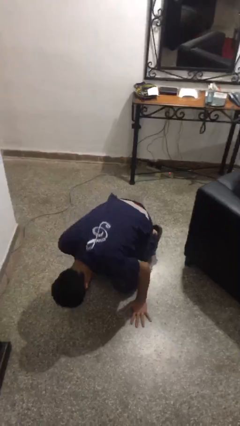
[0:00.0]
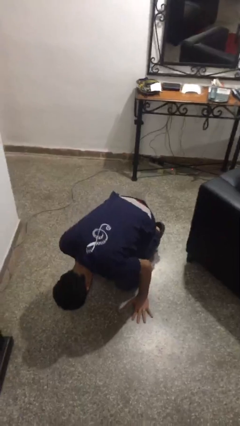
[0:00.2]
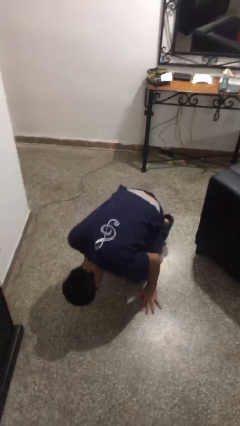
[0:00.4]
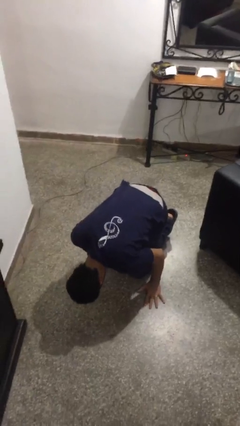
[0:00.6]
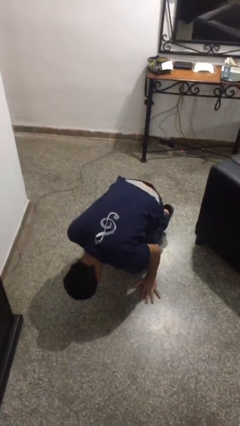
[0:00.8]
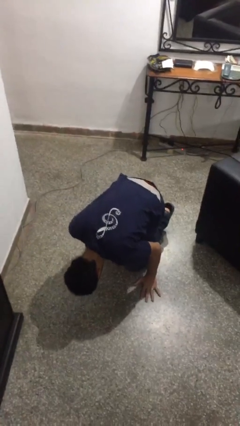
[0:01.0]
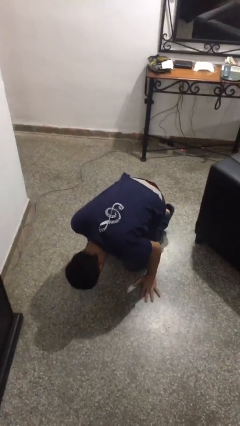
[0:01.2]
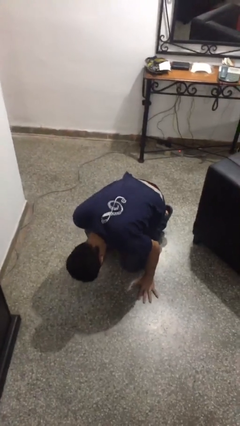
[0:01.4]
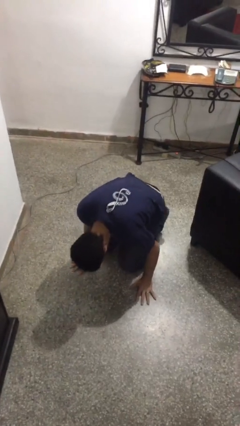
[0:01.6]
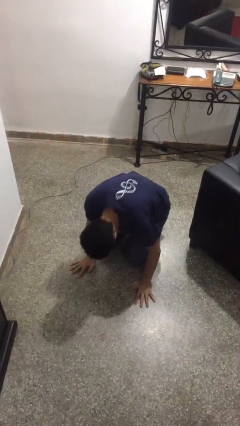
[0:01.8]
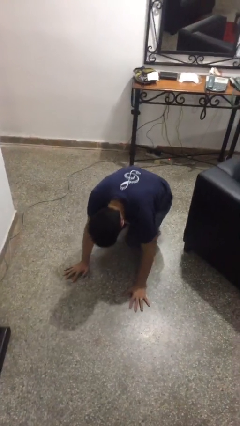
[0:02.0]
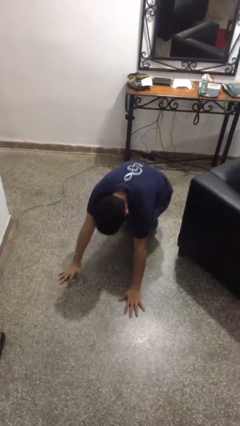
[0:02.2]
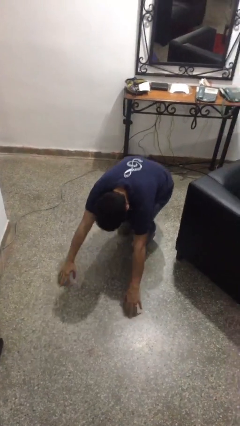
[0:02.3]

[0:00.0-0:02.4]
person lies down on floor

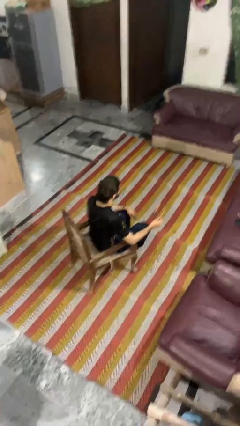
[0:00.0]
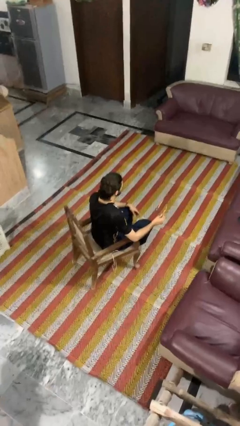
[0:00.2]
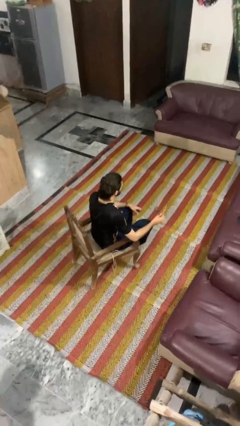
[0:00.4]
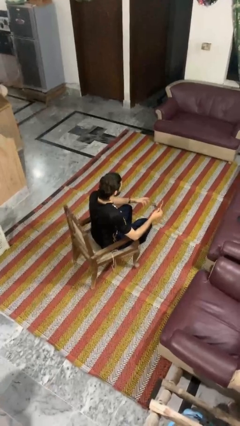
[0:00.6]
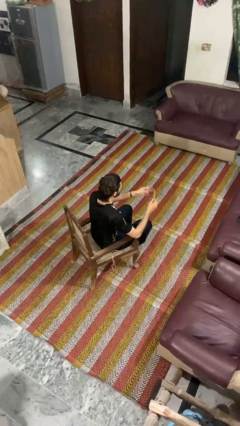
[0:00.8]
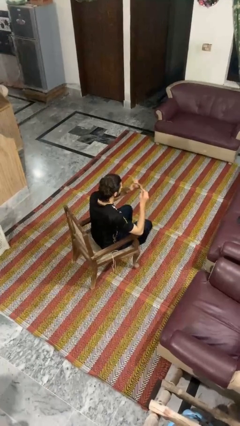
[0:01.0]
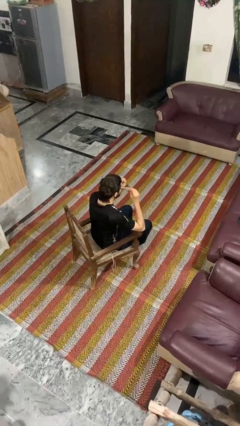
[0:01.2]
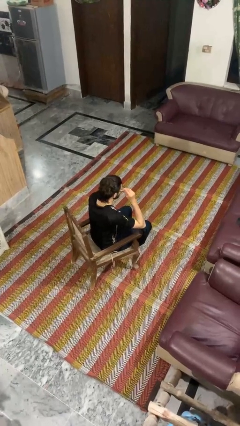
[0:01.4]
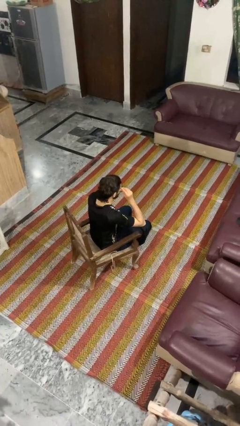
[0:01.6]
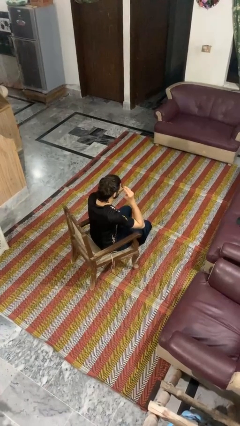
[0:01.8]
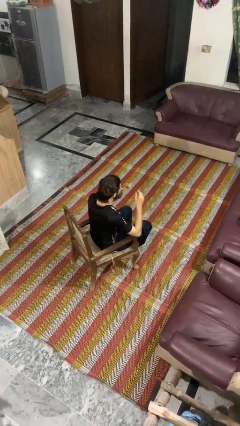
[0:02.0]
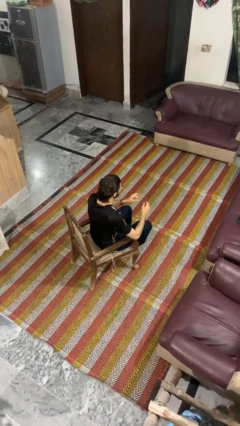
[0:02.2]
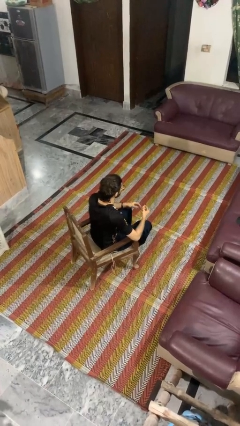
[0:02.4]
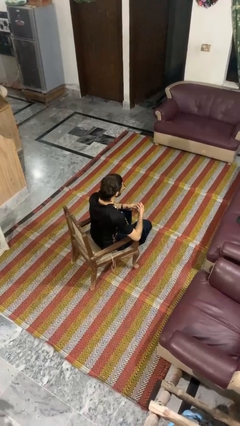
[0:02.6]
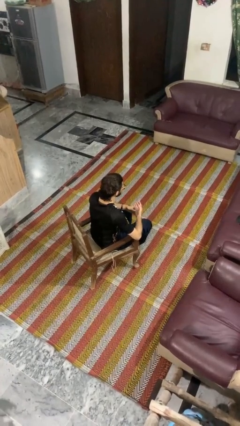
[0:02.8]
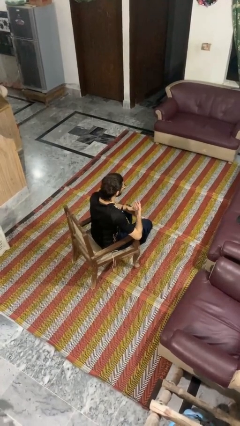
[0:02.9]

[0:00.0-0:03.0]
person puts on glasses

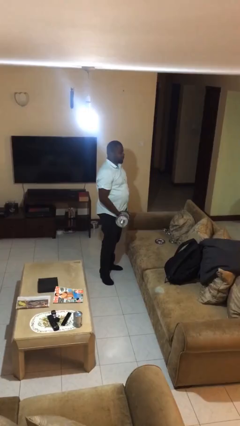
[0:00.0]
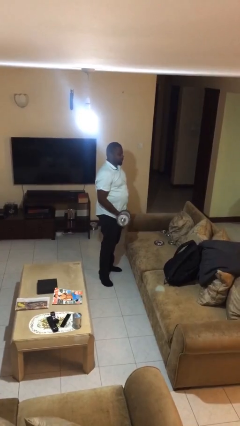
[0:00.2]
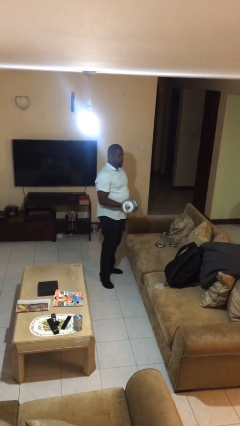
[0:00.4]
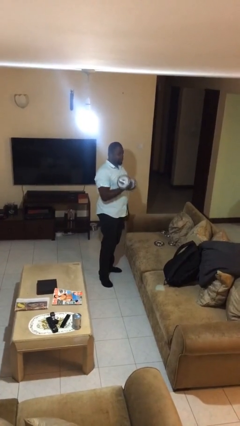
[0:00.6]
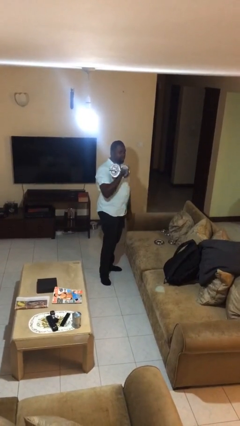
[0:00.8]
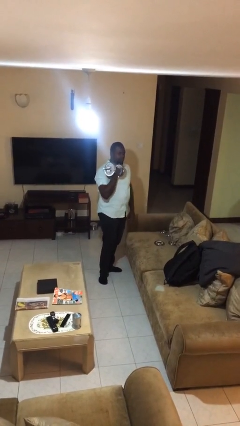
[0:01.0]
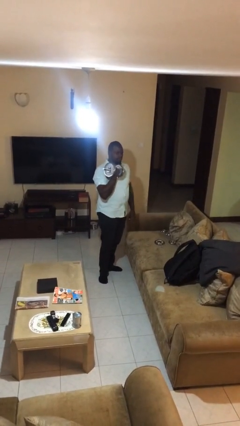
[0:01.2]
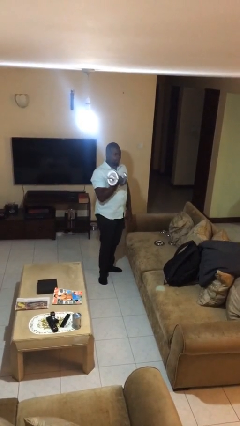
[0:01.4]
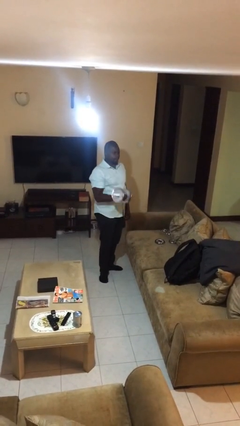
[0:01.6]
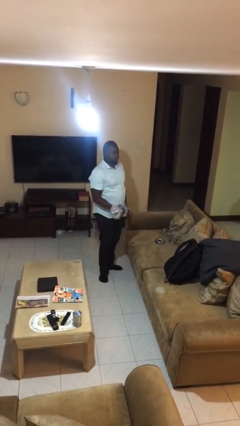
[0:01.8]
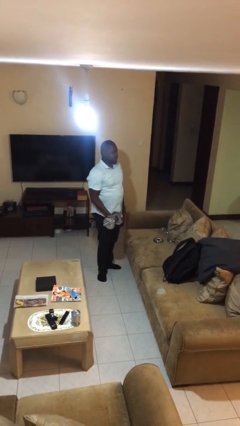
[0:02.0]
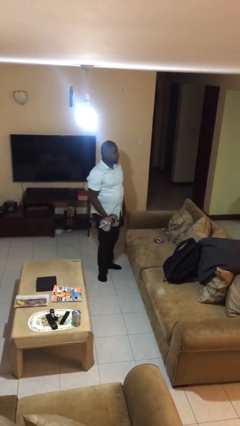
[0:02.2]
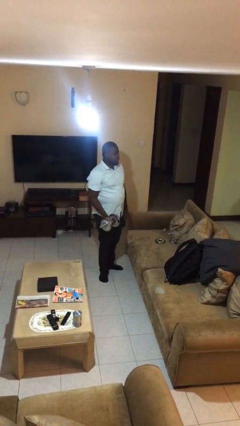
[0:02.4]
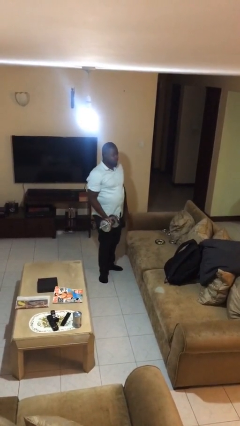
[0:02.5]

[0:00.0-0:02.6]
person lifts dumbbells

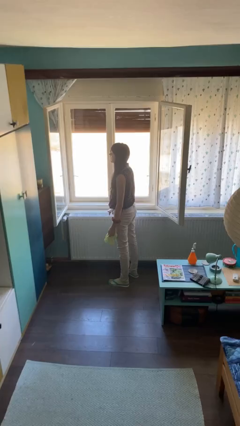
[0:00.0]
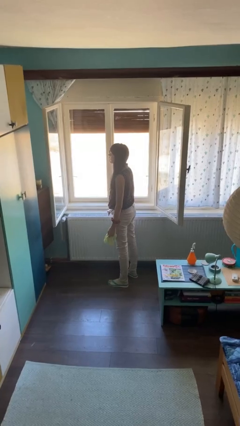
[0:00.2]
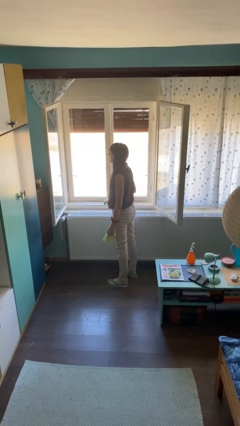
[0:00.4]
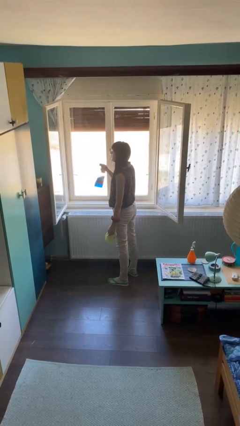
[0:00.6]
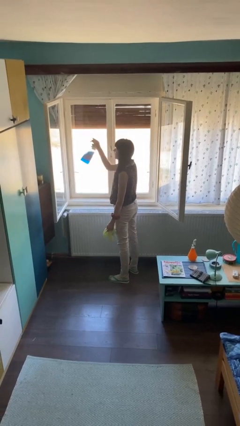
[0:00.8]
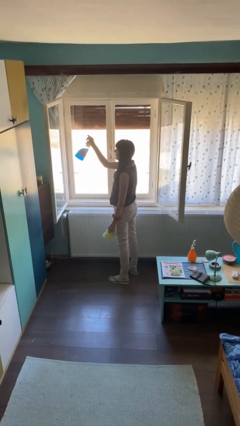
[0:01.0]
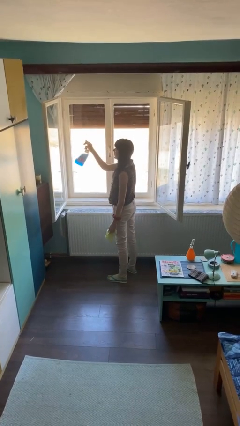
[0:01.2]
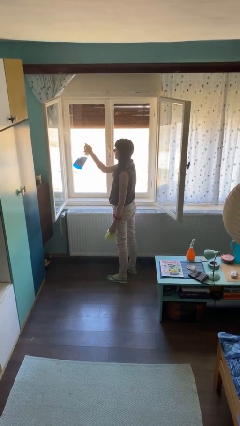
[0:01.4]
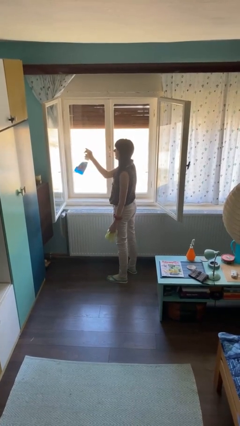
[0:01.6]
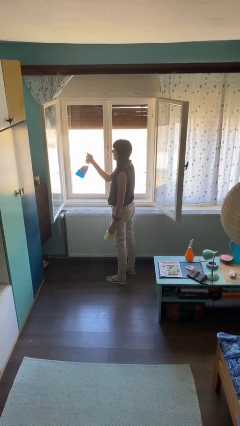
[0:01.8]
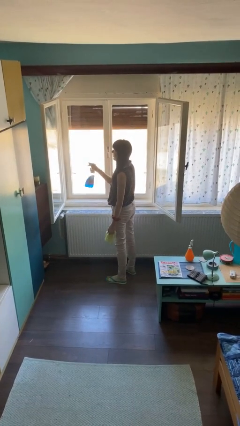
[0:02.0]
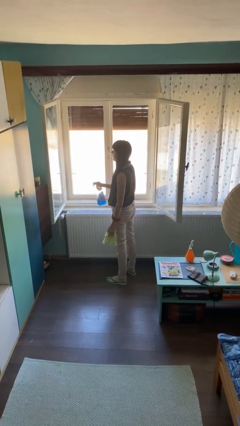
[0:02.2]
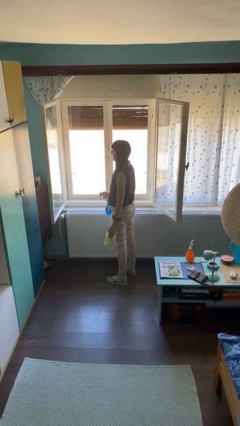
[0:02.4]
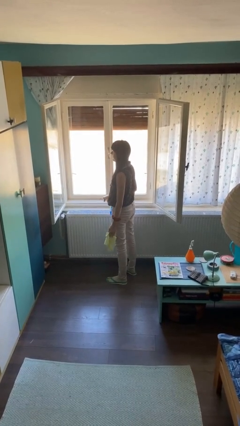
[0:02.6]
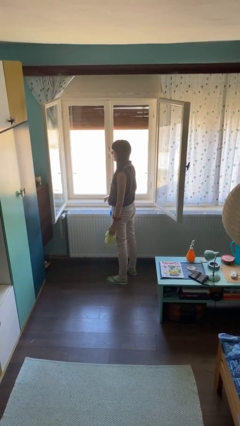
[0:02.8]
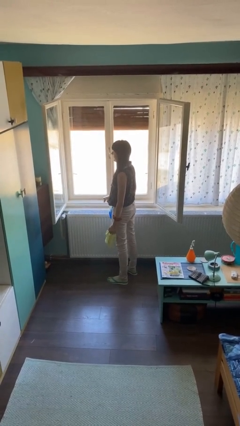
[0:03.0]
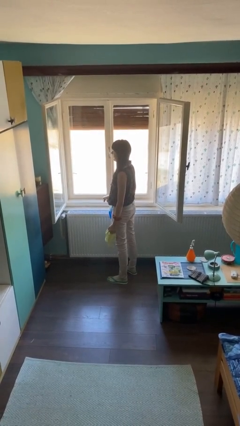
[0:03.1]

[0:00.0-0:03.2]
person sprays from bottle

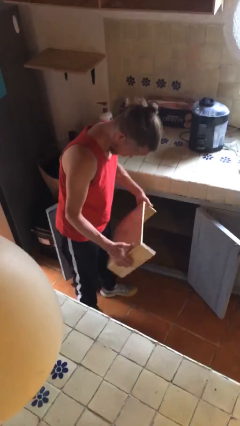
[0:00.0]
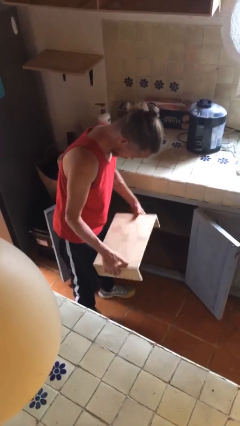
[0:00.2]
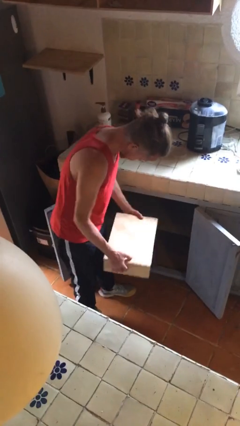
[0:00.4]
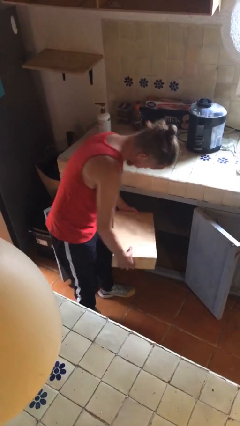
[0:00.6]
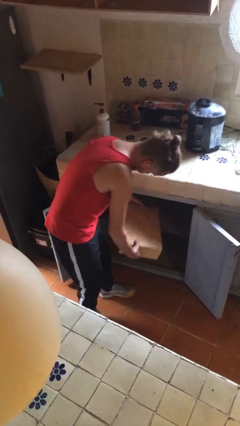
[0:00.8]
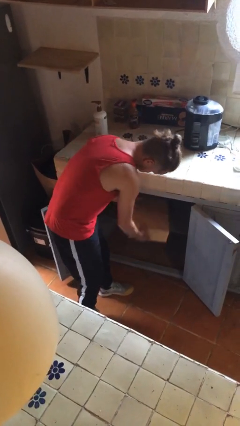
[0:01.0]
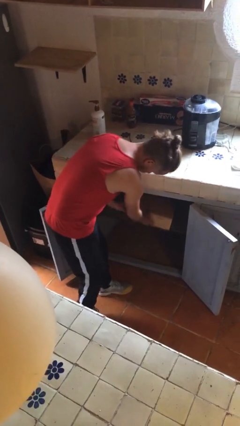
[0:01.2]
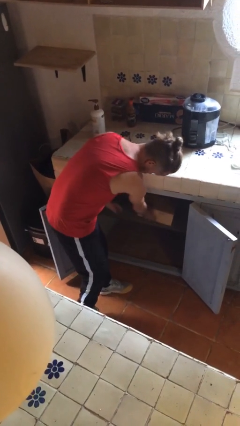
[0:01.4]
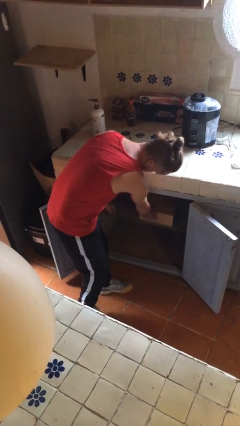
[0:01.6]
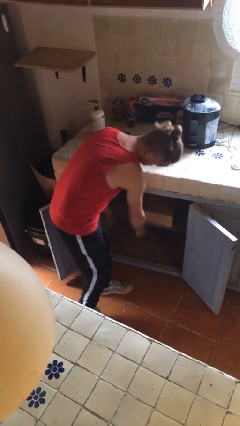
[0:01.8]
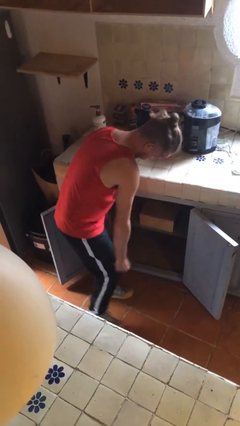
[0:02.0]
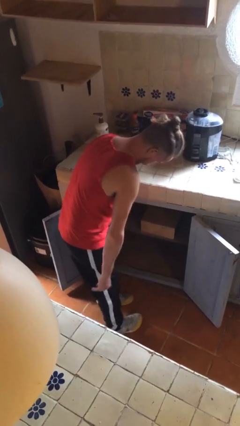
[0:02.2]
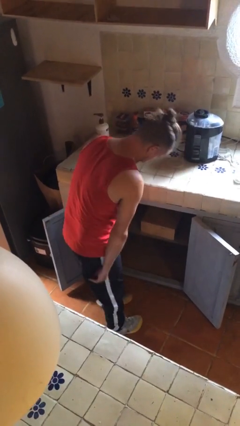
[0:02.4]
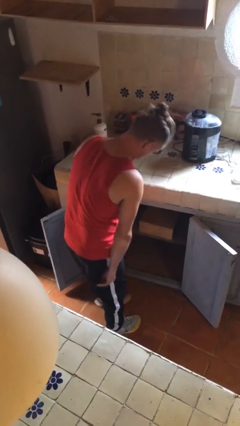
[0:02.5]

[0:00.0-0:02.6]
person puts down object into cabinet

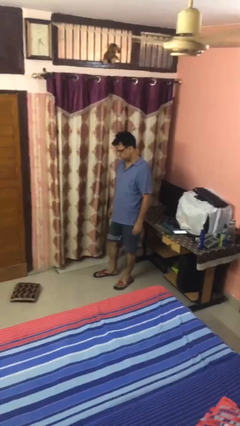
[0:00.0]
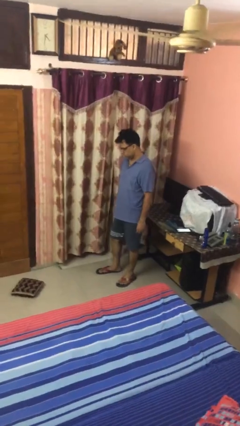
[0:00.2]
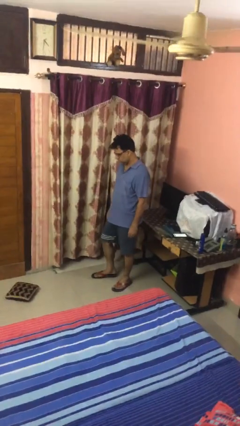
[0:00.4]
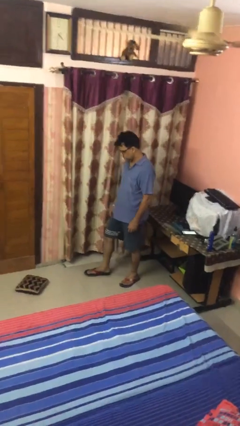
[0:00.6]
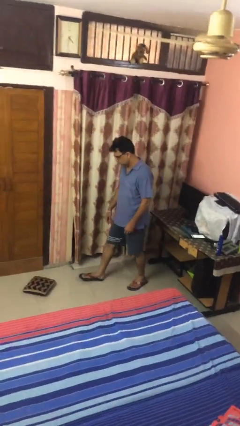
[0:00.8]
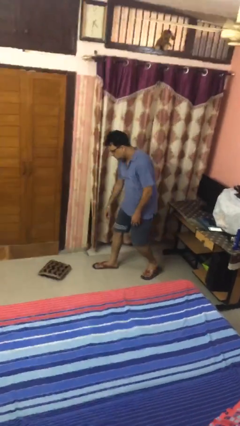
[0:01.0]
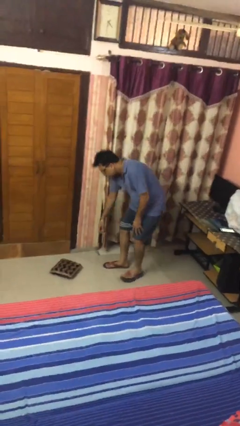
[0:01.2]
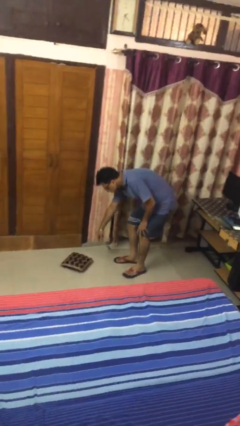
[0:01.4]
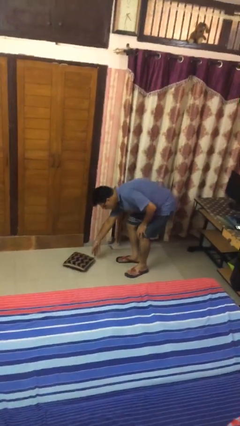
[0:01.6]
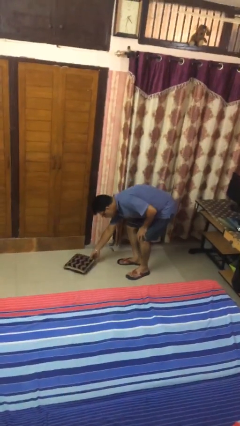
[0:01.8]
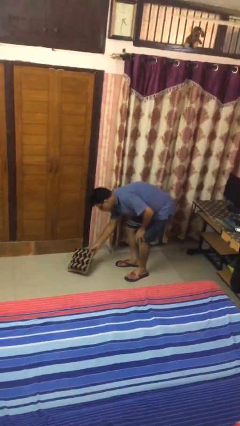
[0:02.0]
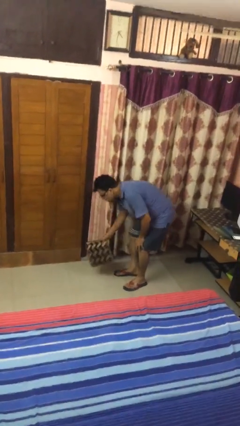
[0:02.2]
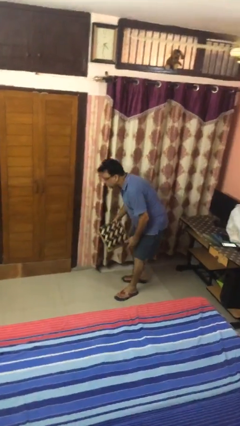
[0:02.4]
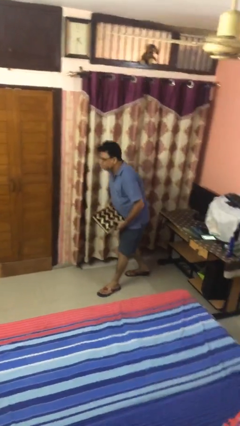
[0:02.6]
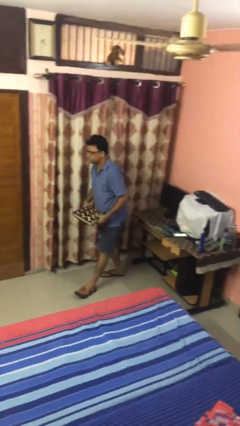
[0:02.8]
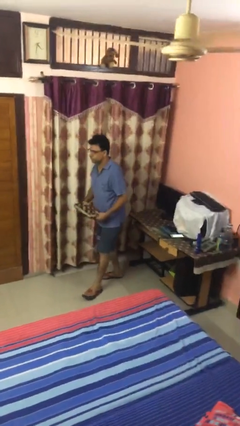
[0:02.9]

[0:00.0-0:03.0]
person picks up object from floor

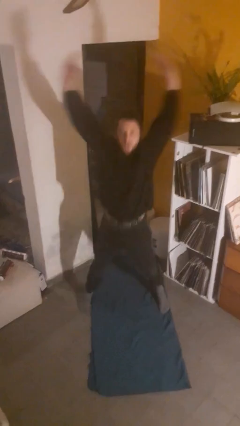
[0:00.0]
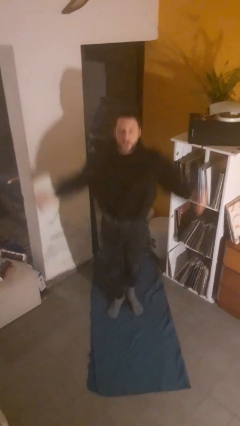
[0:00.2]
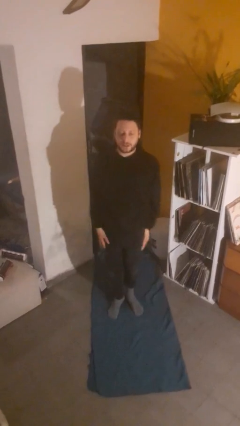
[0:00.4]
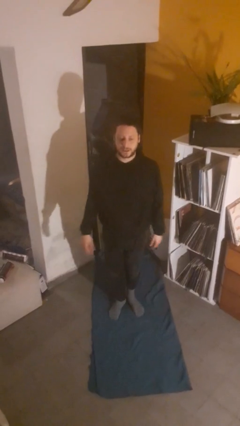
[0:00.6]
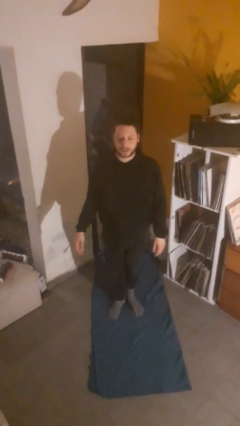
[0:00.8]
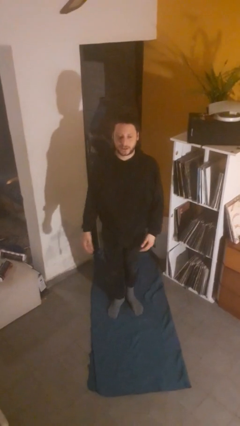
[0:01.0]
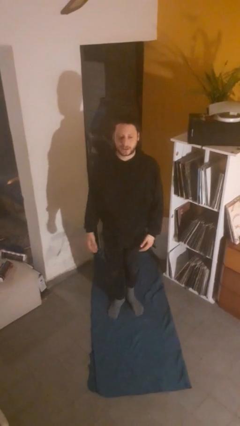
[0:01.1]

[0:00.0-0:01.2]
person exercises with jumping jacks
